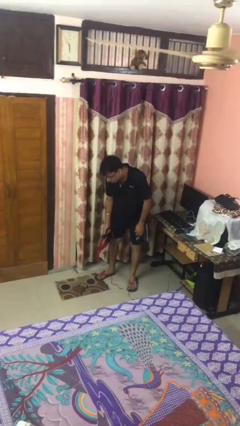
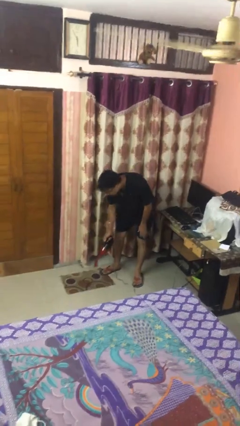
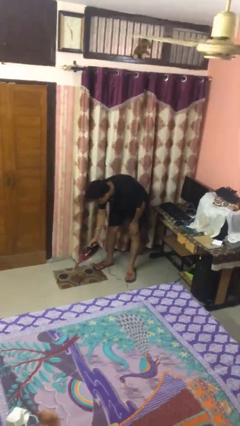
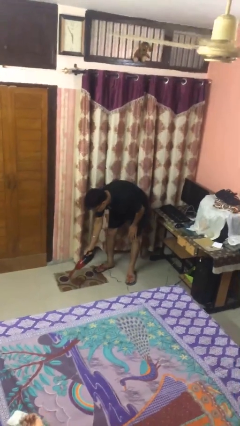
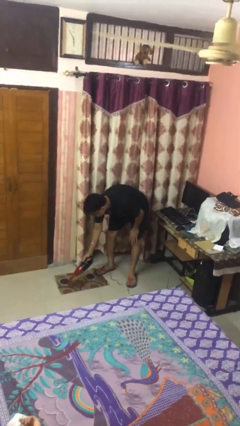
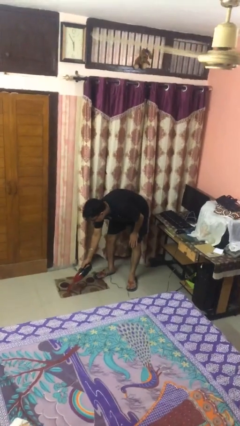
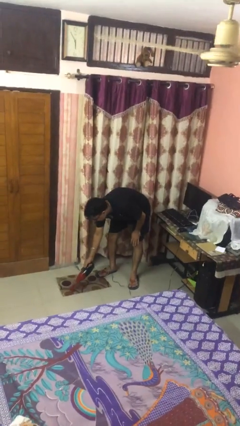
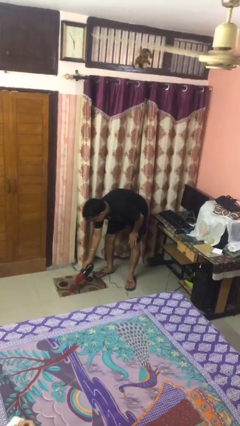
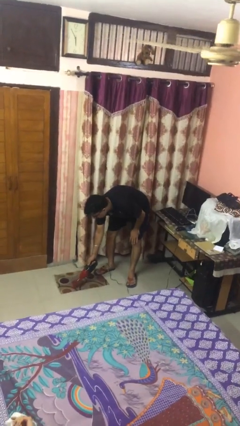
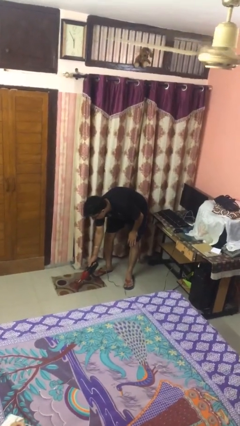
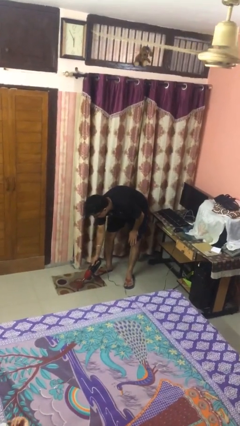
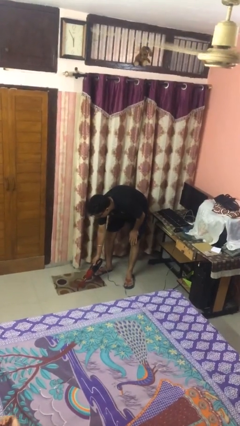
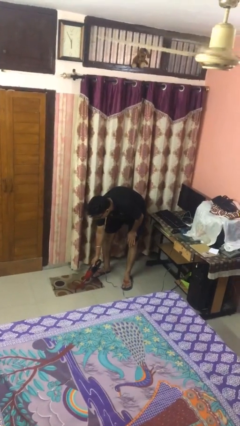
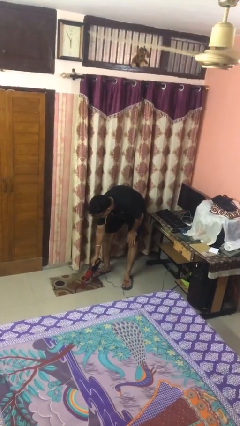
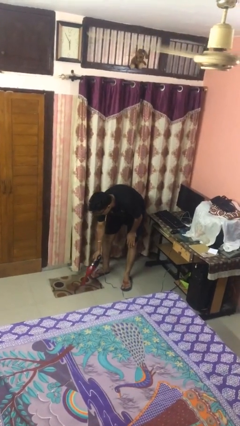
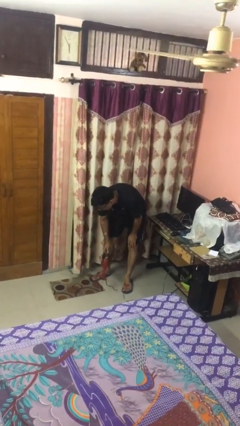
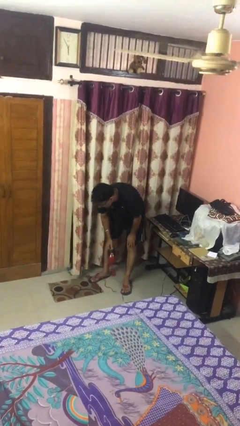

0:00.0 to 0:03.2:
person vacuums carpet

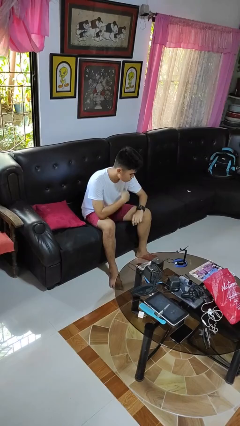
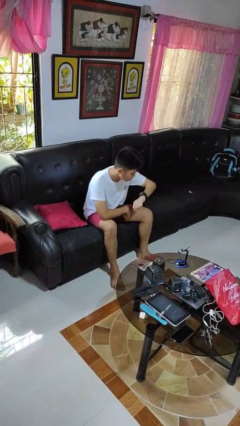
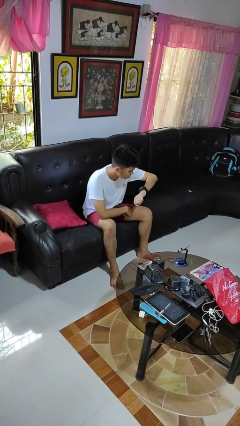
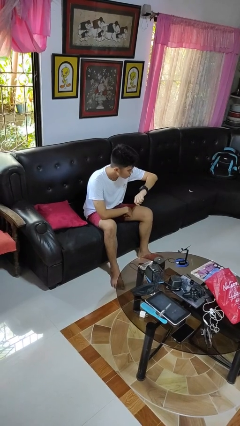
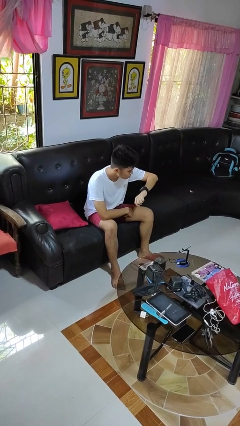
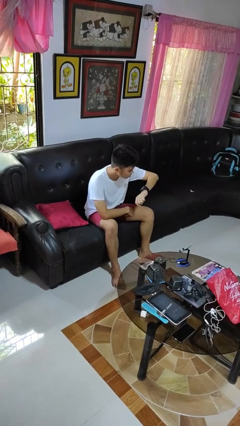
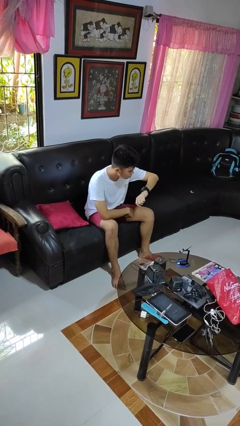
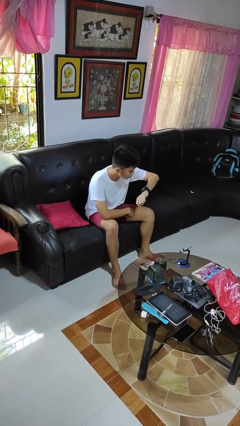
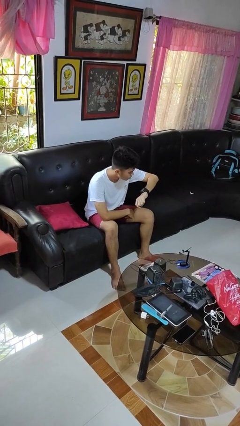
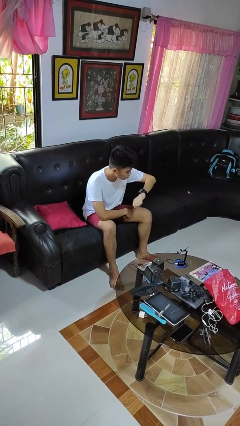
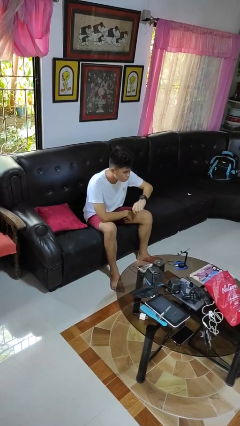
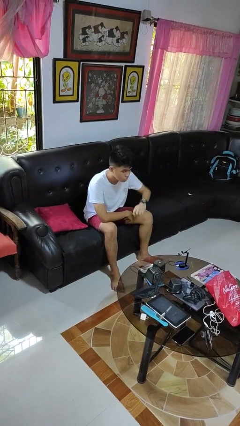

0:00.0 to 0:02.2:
person looks at wristwatch

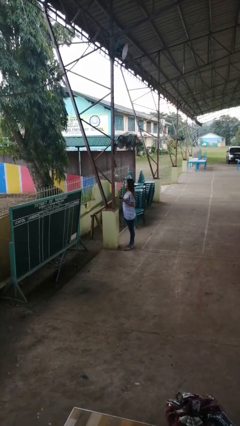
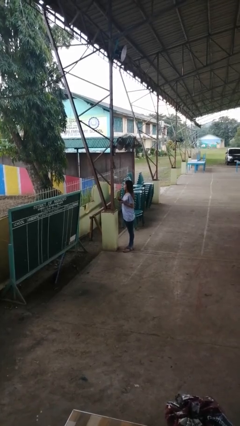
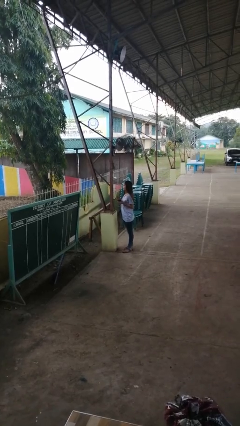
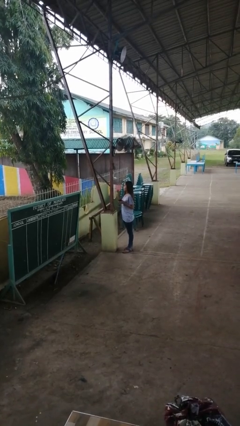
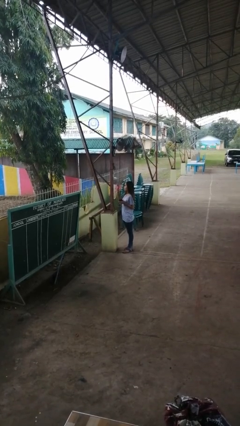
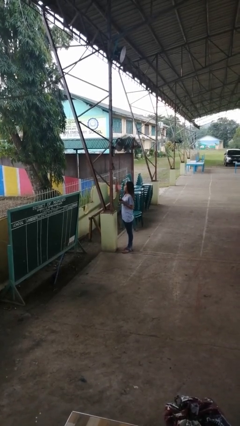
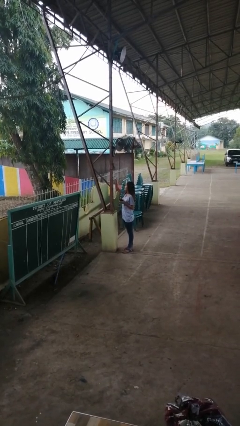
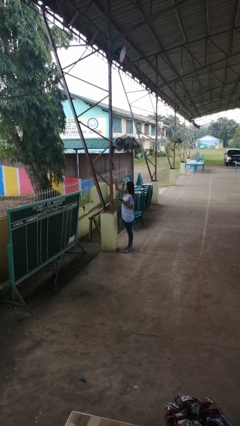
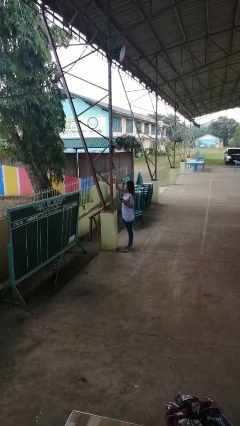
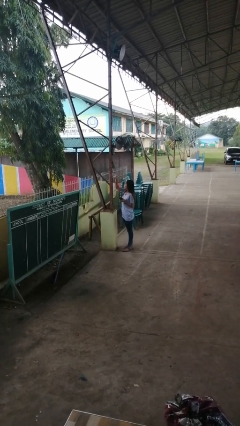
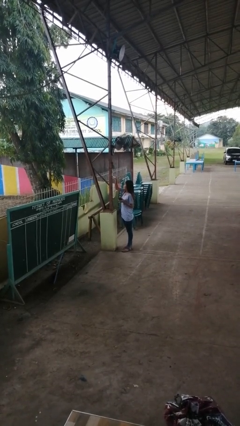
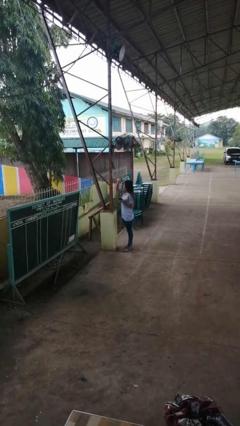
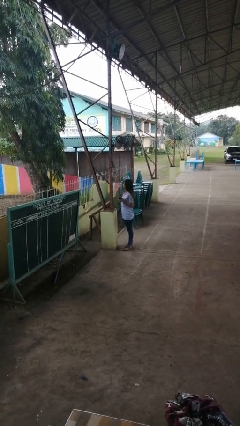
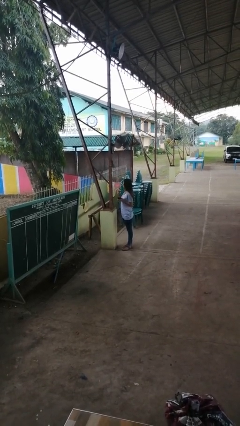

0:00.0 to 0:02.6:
person unplugs from electrical socket

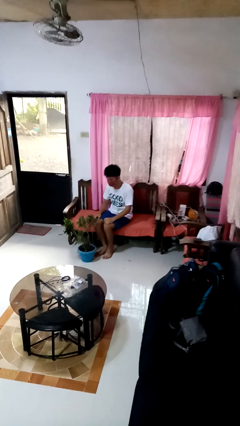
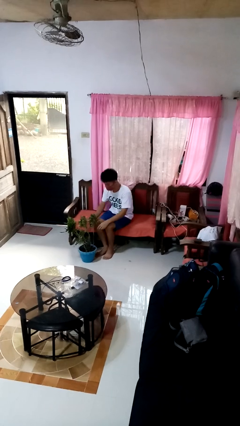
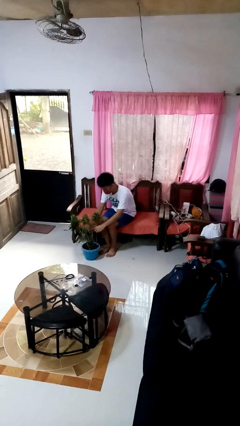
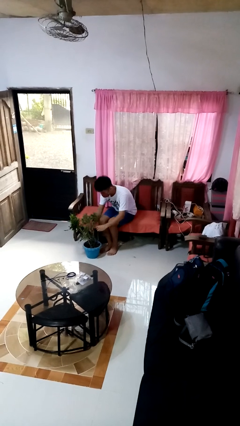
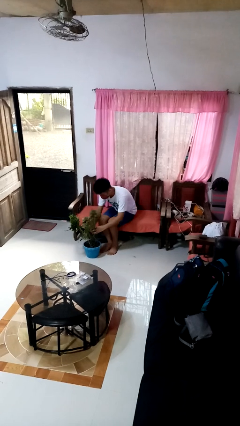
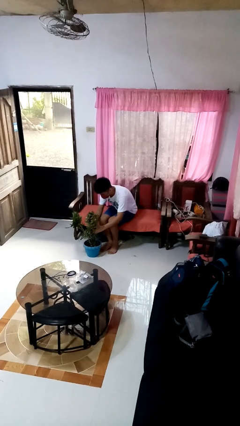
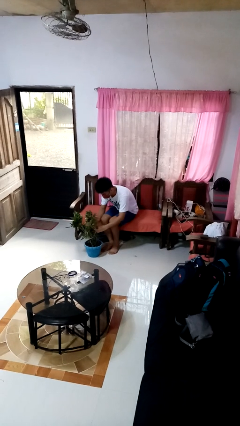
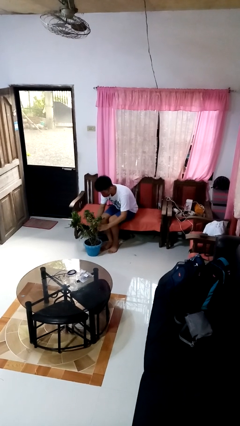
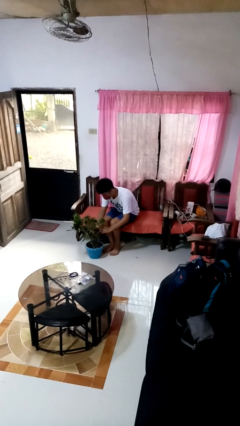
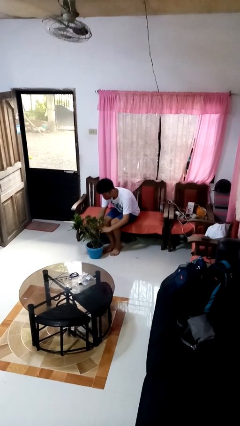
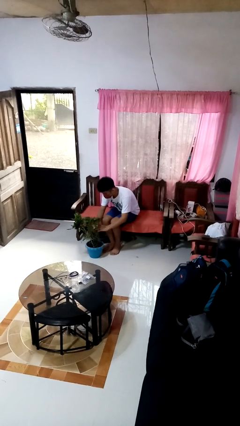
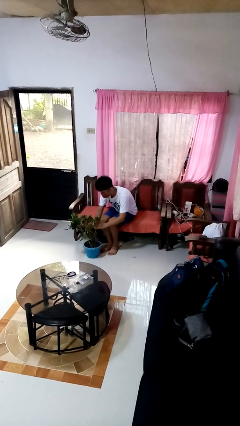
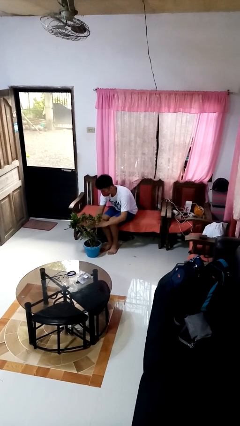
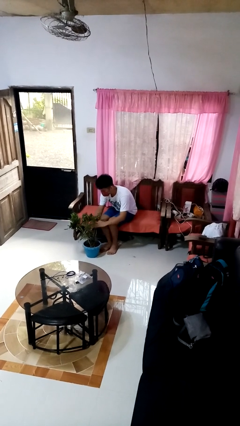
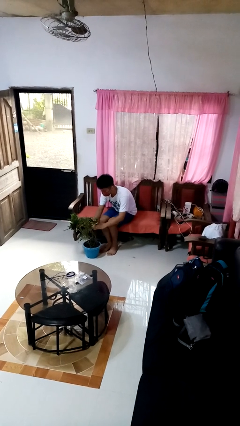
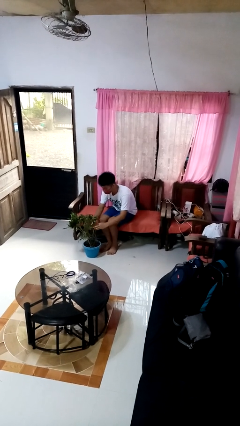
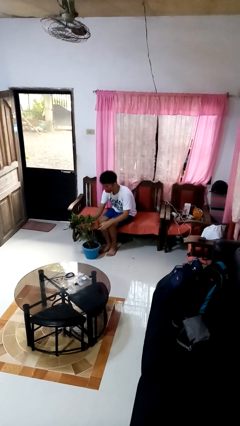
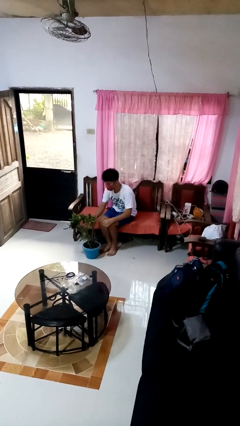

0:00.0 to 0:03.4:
person arranges flowers in vase

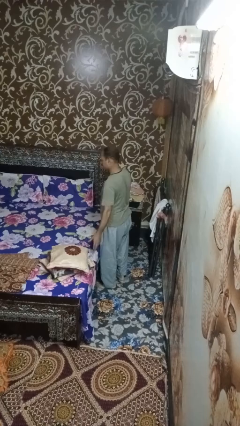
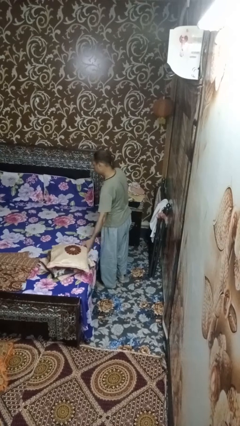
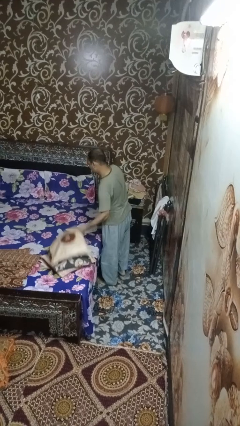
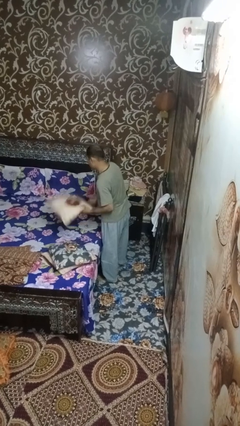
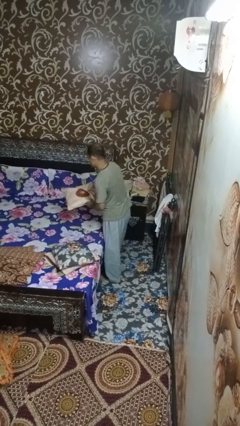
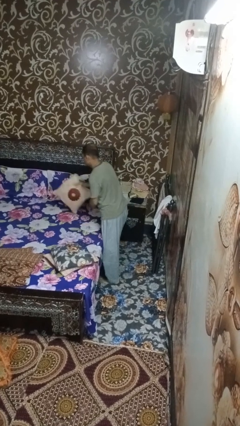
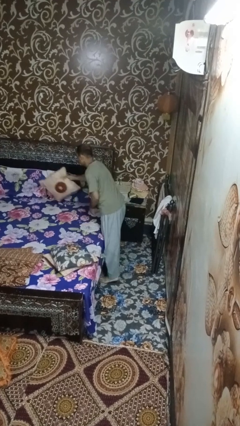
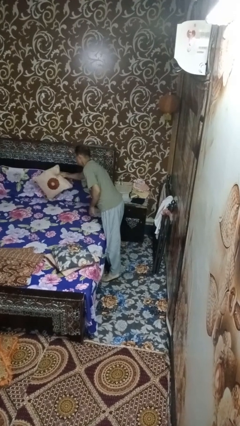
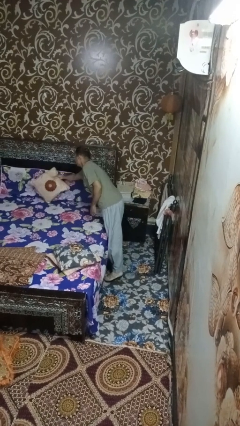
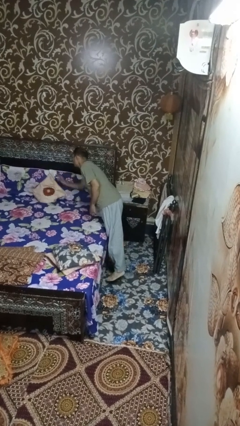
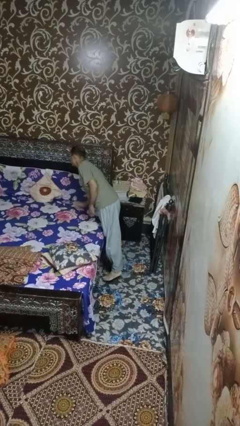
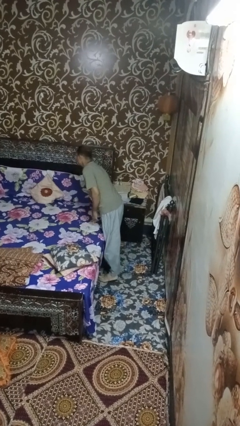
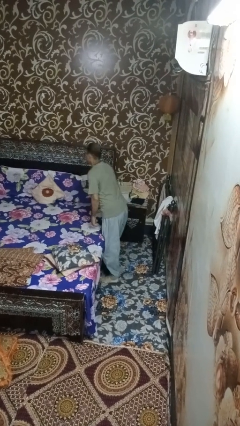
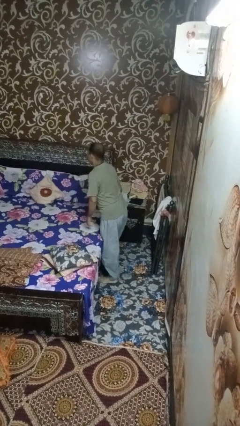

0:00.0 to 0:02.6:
person makes bed

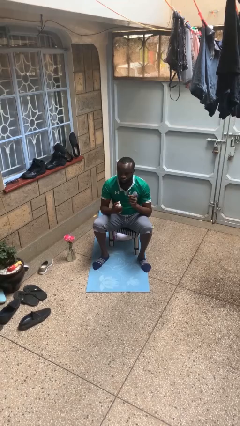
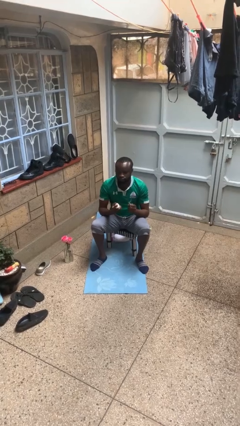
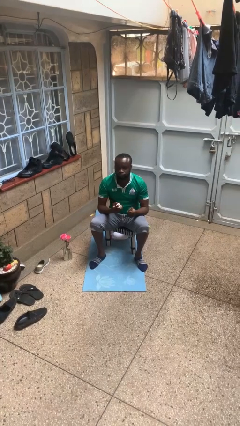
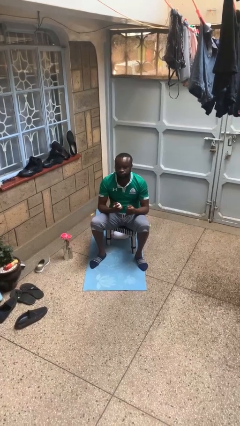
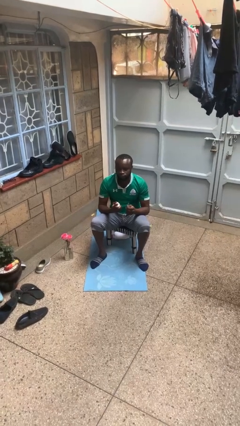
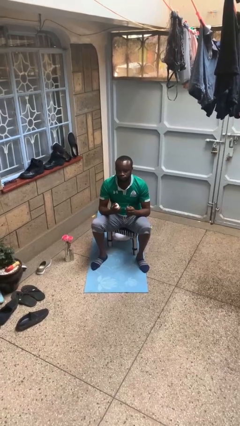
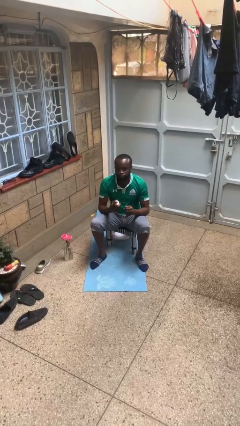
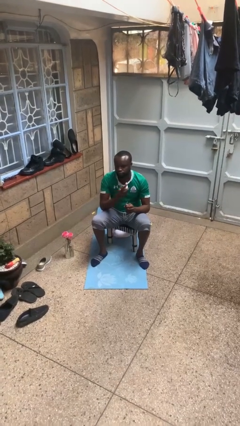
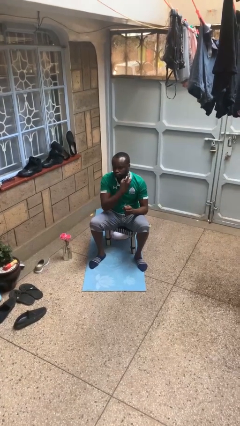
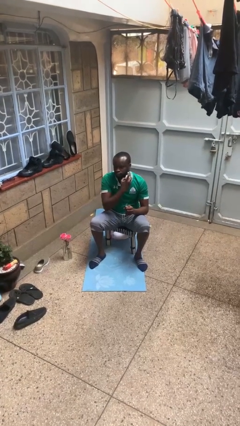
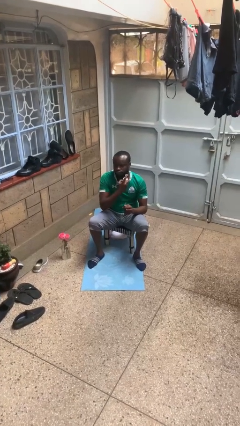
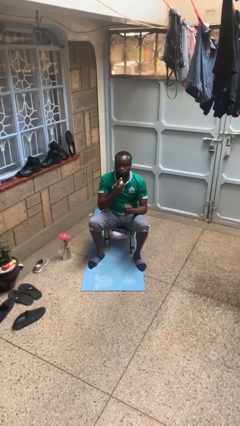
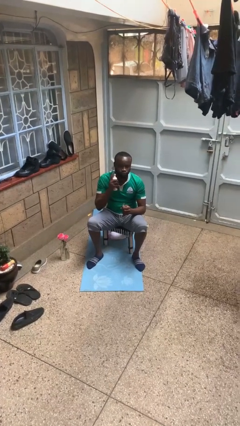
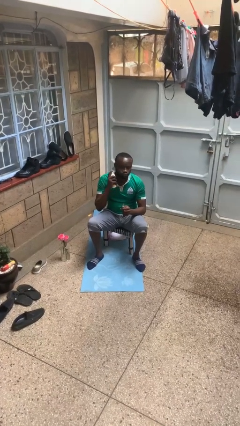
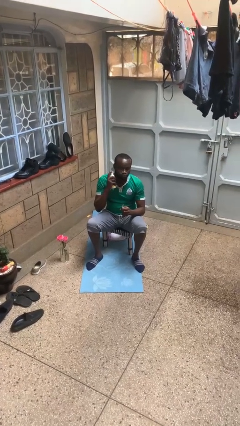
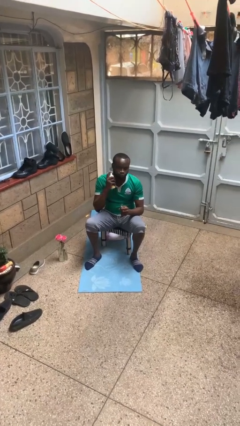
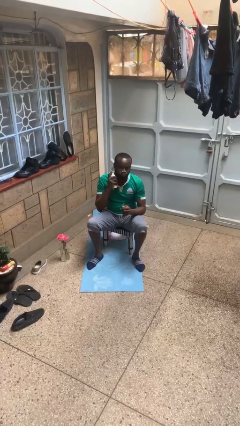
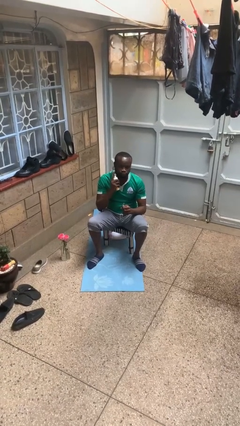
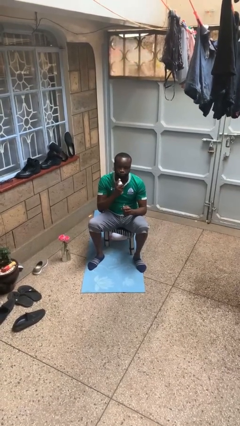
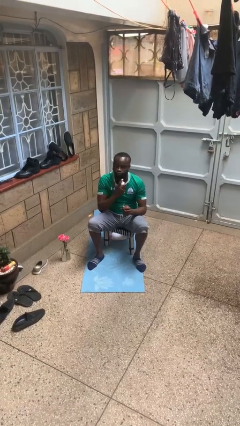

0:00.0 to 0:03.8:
person applies shaving cream
